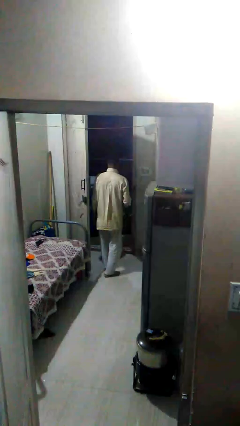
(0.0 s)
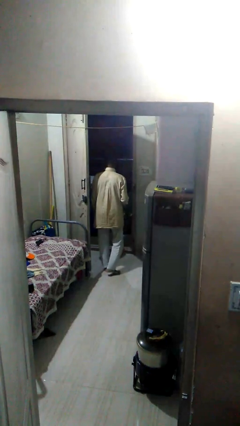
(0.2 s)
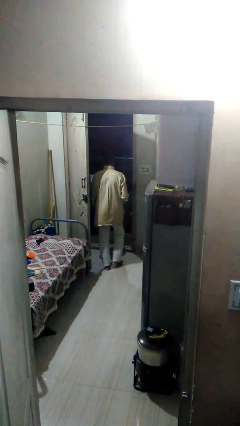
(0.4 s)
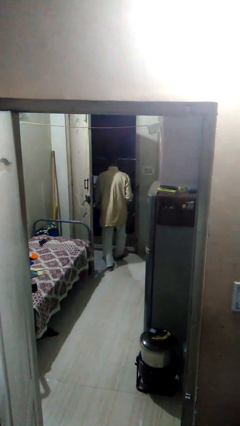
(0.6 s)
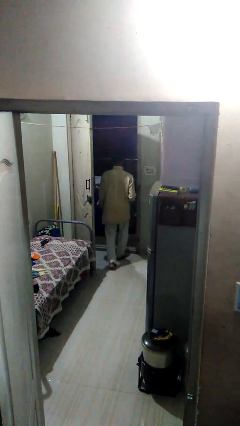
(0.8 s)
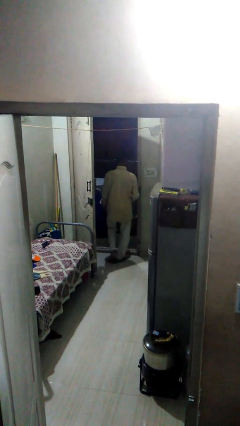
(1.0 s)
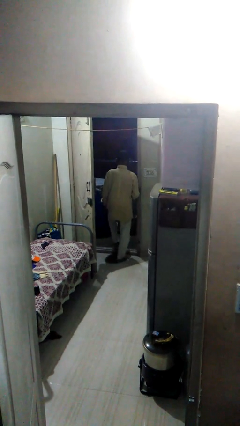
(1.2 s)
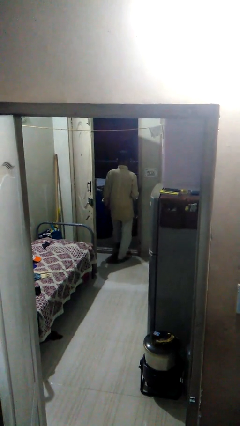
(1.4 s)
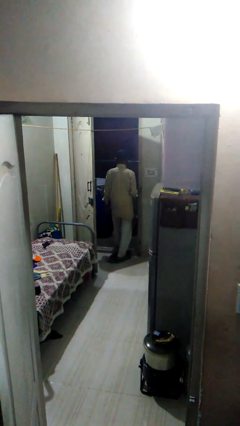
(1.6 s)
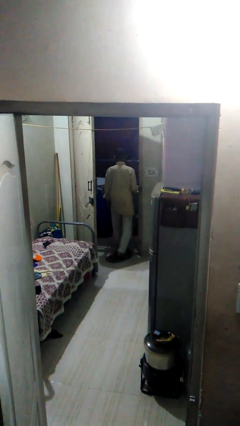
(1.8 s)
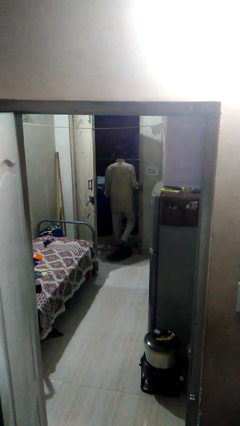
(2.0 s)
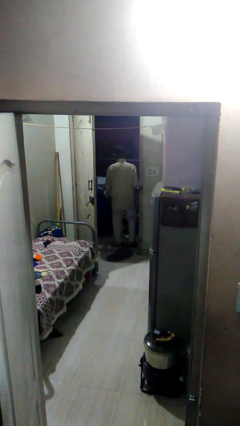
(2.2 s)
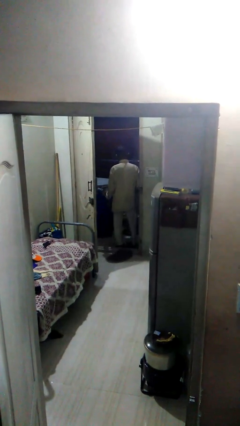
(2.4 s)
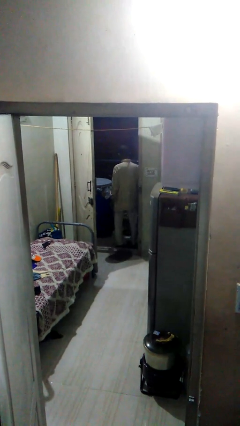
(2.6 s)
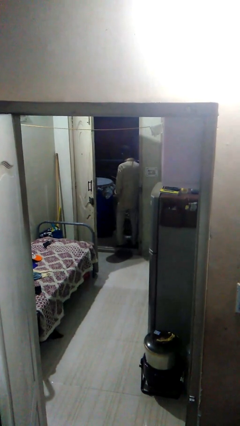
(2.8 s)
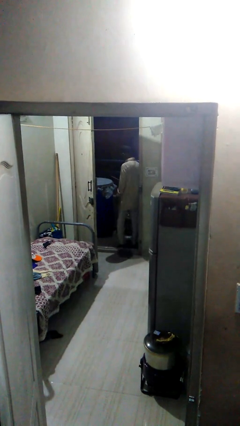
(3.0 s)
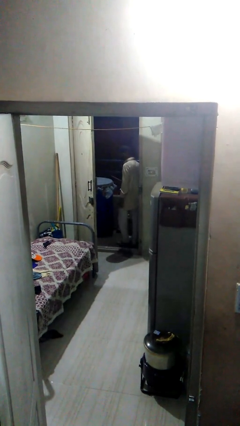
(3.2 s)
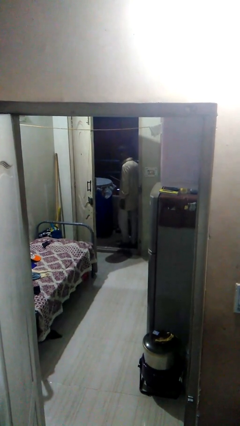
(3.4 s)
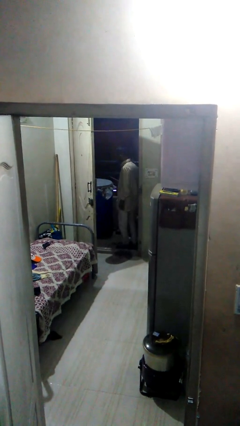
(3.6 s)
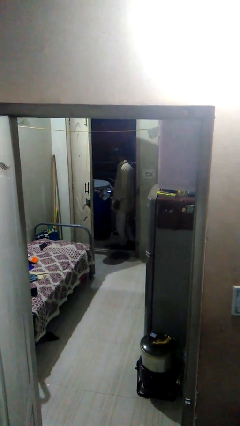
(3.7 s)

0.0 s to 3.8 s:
person exits scene through structure

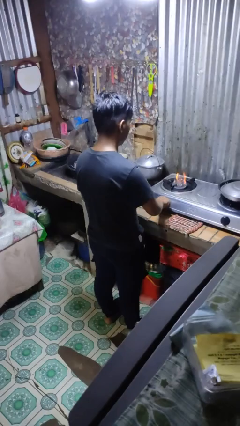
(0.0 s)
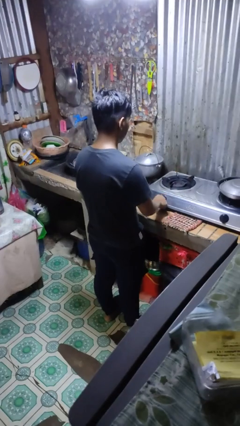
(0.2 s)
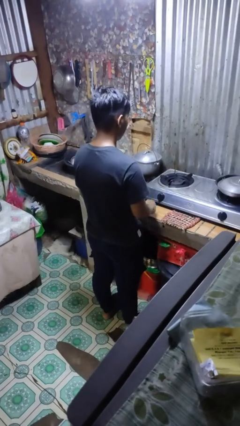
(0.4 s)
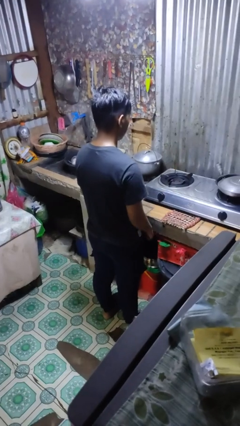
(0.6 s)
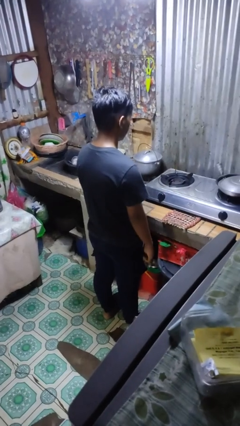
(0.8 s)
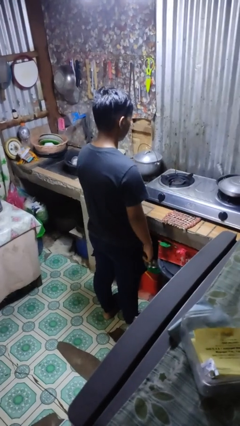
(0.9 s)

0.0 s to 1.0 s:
person turns off stovetop

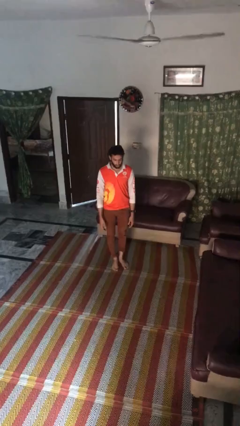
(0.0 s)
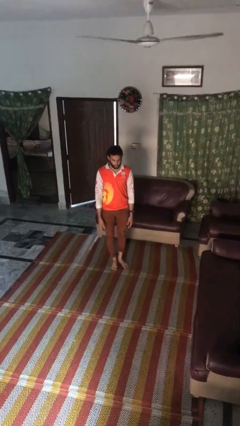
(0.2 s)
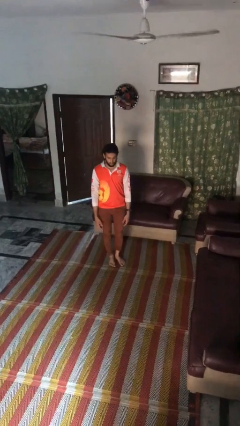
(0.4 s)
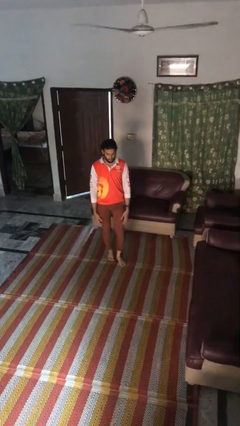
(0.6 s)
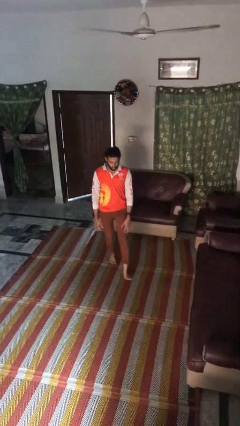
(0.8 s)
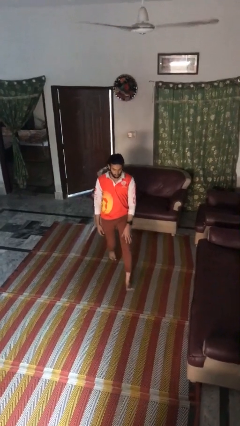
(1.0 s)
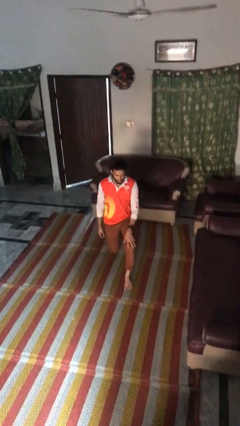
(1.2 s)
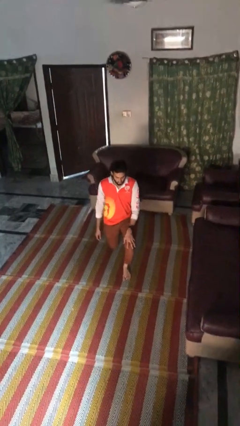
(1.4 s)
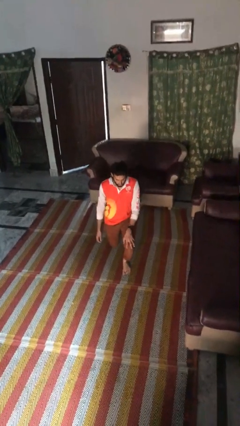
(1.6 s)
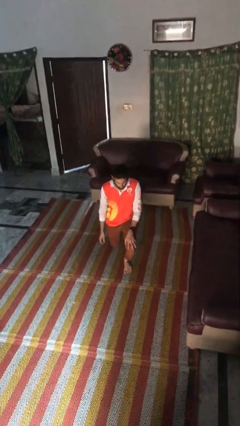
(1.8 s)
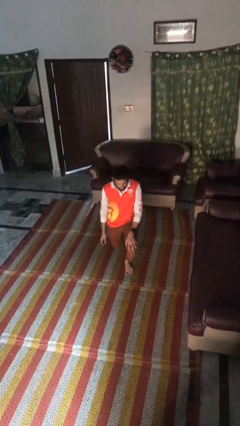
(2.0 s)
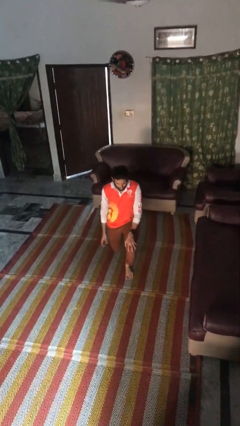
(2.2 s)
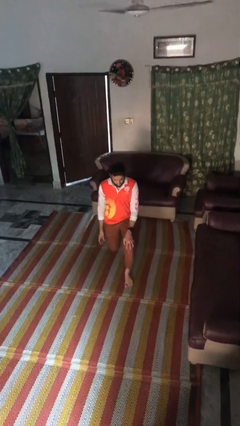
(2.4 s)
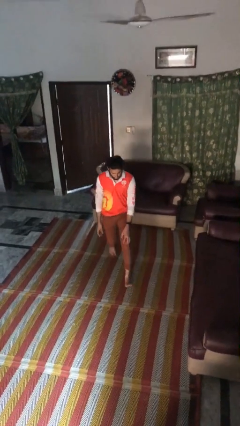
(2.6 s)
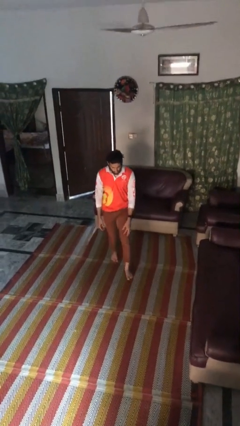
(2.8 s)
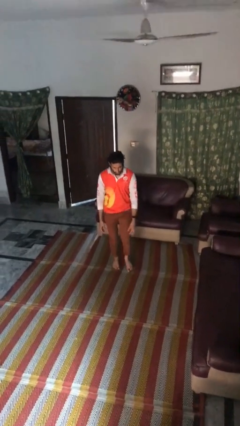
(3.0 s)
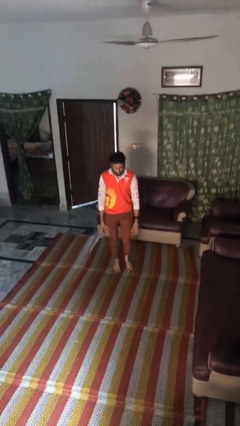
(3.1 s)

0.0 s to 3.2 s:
person exercises with lunges

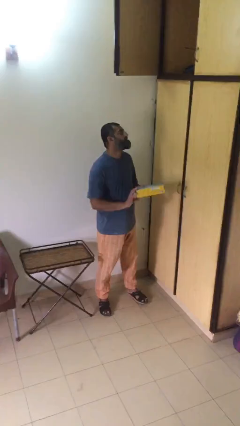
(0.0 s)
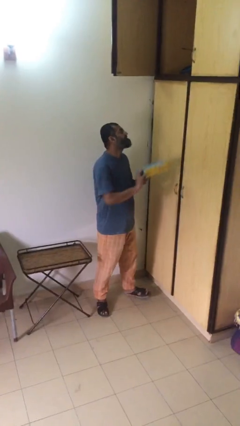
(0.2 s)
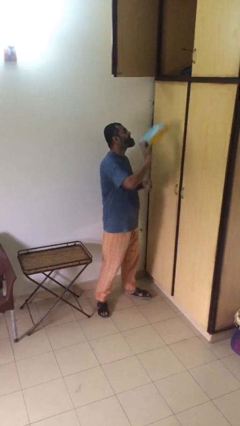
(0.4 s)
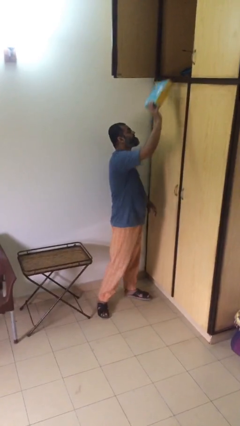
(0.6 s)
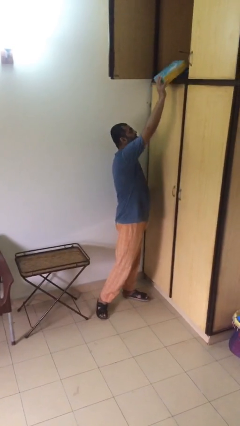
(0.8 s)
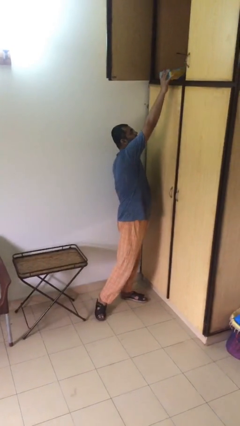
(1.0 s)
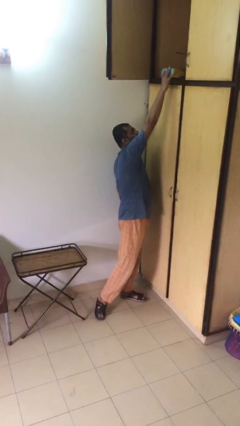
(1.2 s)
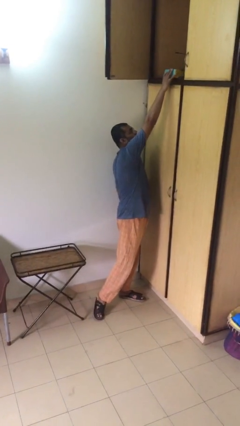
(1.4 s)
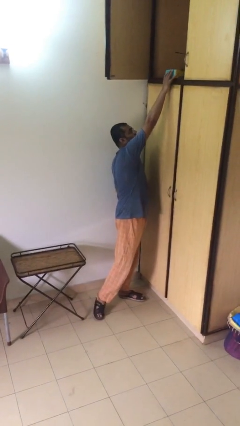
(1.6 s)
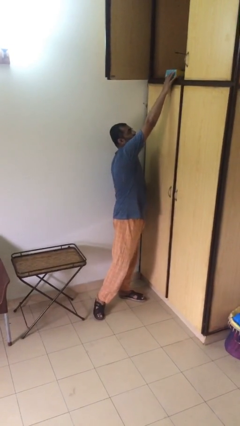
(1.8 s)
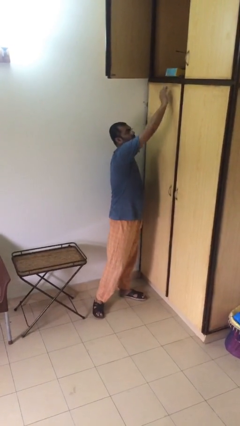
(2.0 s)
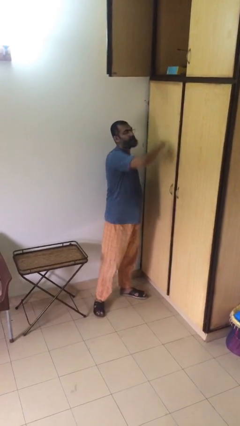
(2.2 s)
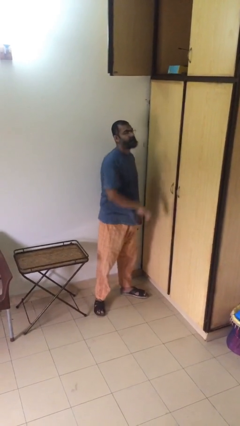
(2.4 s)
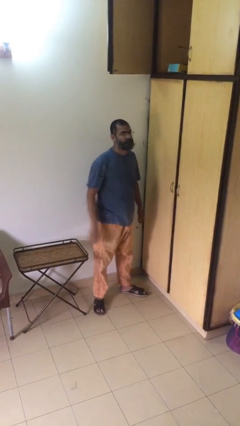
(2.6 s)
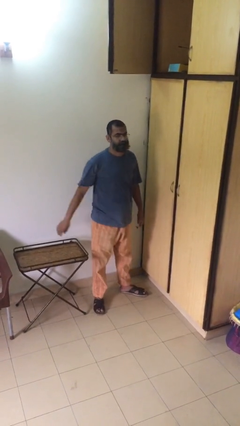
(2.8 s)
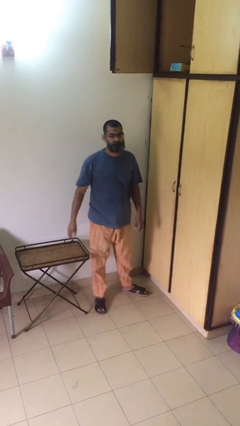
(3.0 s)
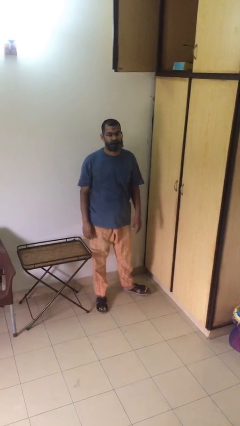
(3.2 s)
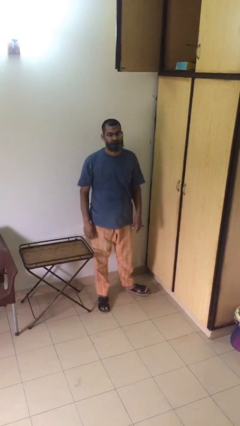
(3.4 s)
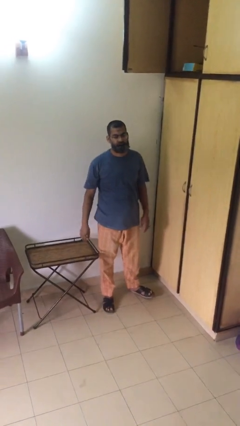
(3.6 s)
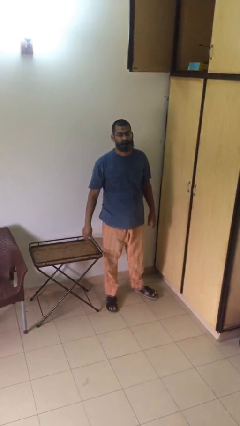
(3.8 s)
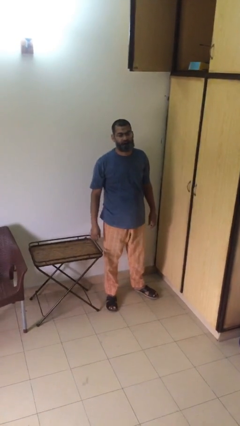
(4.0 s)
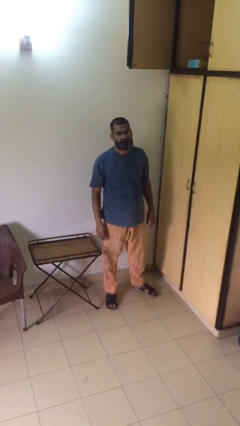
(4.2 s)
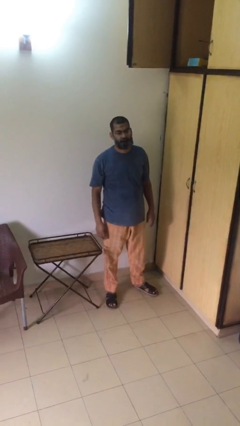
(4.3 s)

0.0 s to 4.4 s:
person puts down object on shelf

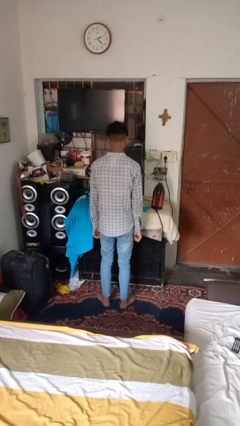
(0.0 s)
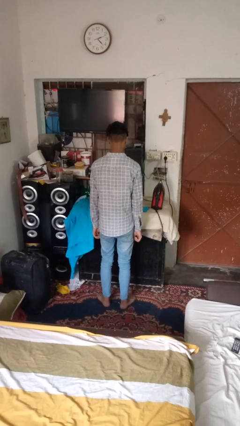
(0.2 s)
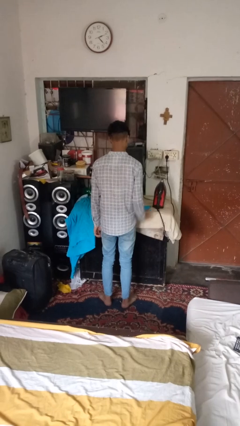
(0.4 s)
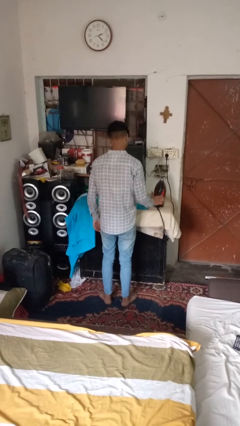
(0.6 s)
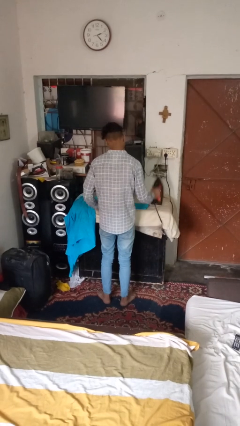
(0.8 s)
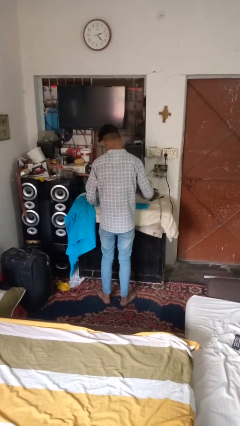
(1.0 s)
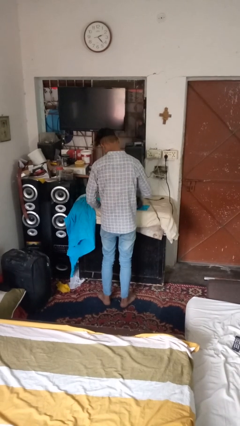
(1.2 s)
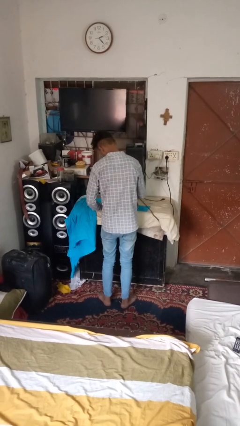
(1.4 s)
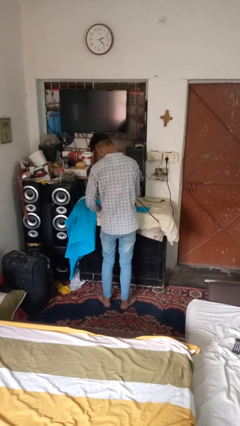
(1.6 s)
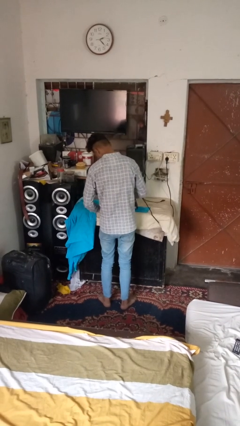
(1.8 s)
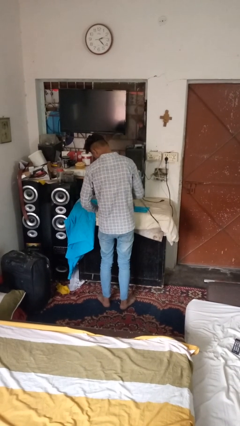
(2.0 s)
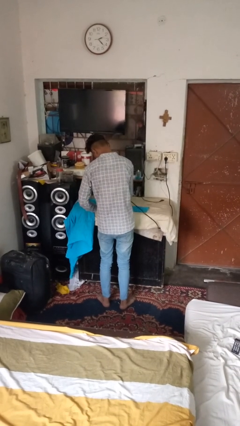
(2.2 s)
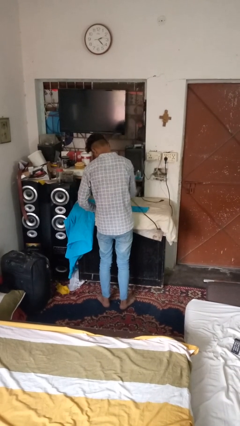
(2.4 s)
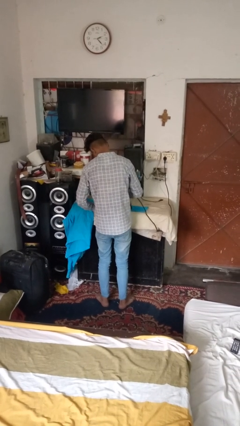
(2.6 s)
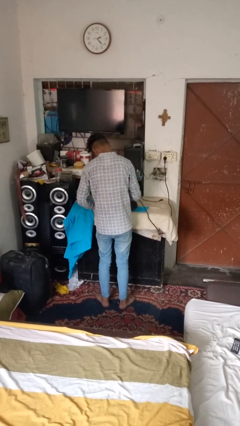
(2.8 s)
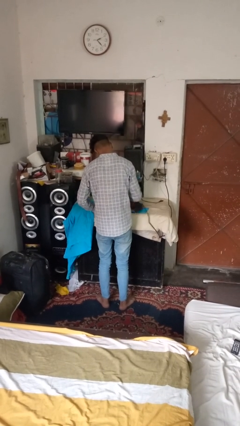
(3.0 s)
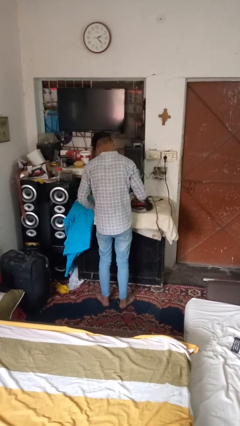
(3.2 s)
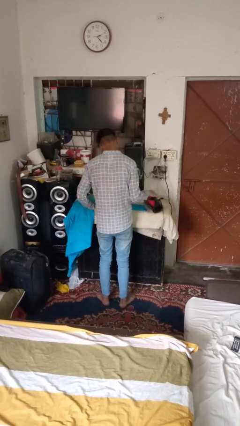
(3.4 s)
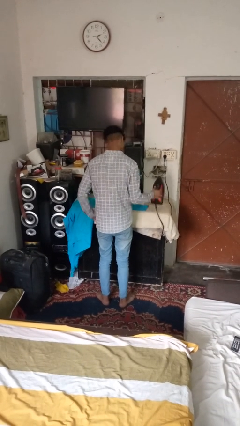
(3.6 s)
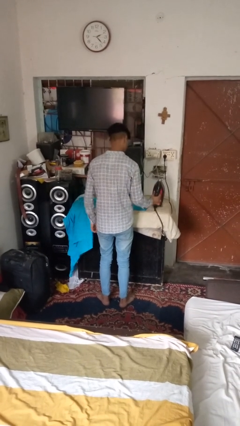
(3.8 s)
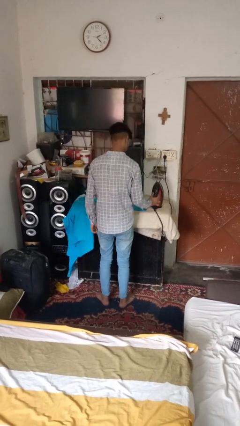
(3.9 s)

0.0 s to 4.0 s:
person irons clothes

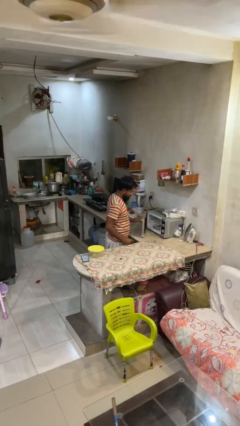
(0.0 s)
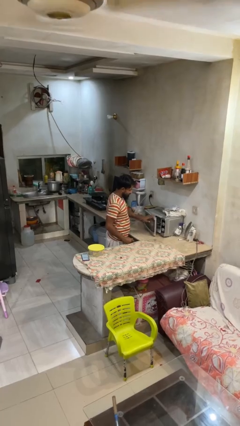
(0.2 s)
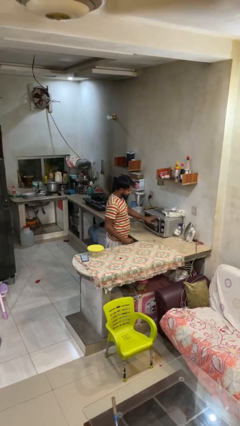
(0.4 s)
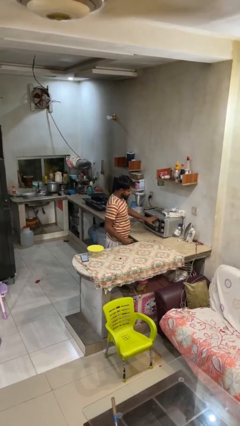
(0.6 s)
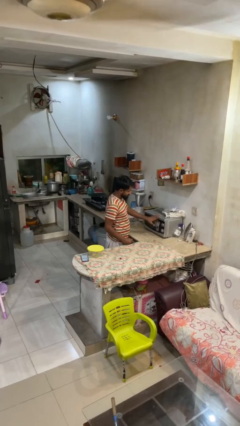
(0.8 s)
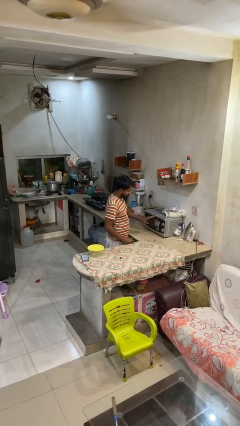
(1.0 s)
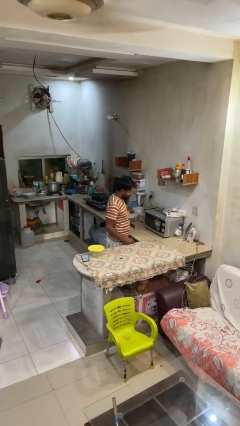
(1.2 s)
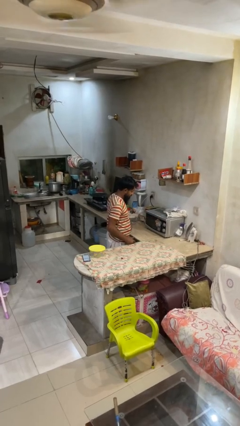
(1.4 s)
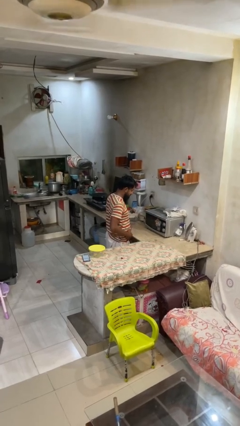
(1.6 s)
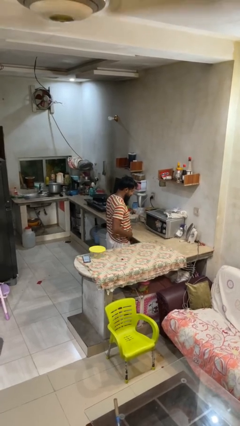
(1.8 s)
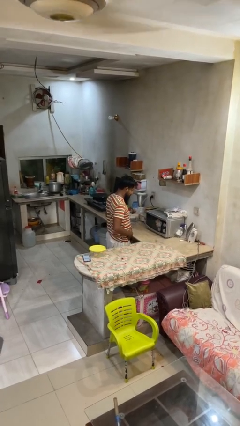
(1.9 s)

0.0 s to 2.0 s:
person closes microwave
